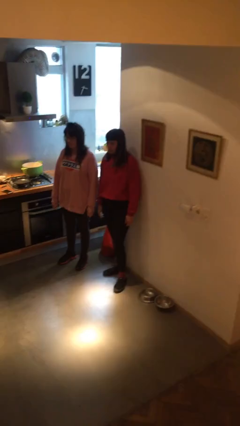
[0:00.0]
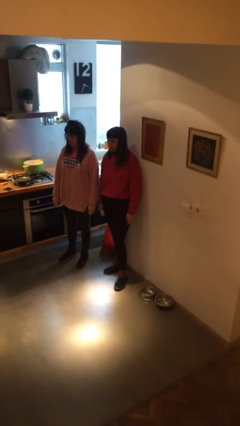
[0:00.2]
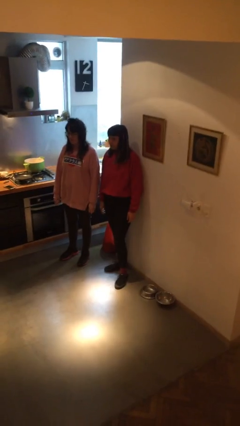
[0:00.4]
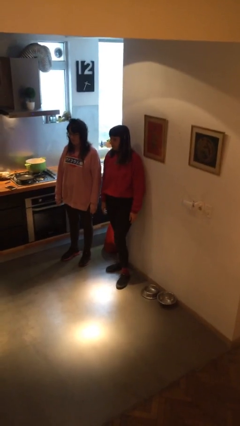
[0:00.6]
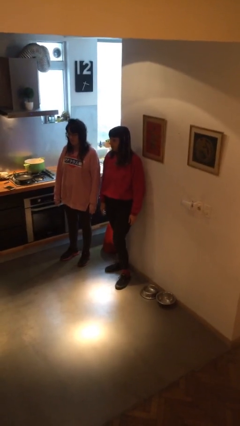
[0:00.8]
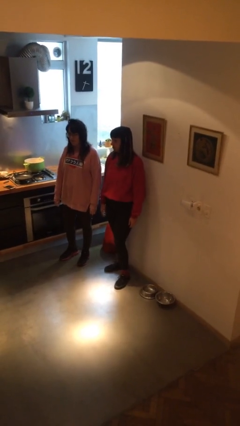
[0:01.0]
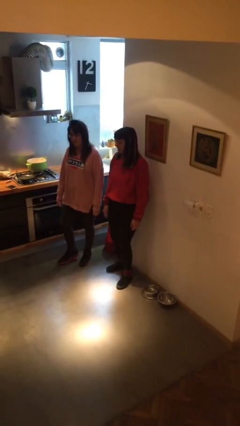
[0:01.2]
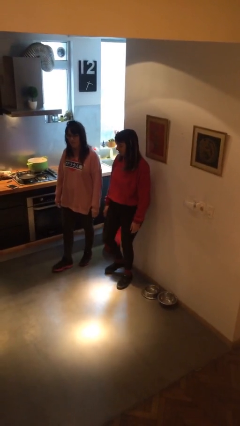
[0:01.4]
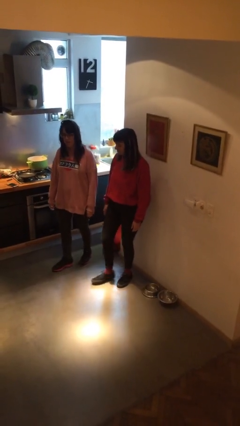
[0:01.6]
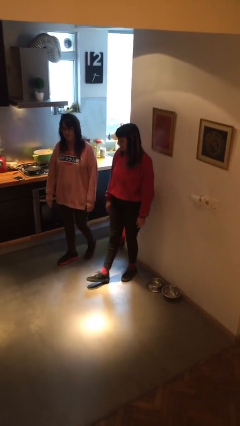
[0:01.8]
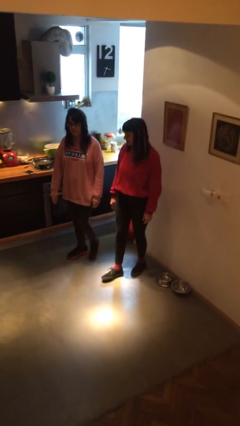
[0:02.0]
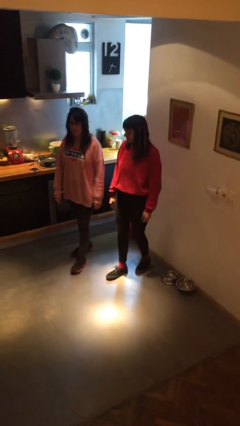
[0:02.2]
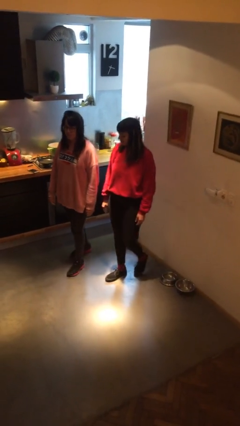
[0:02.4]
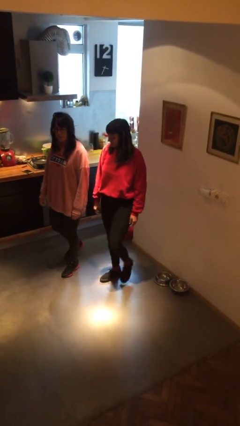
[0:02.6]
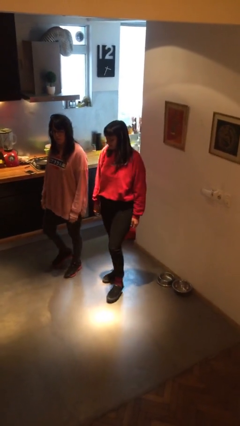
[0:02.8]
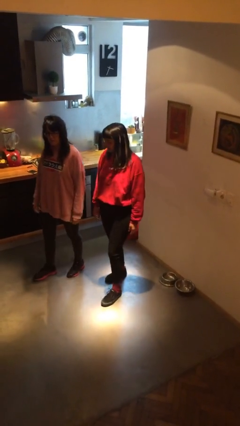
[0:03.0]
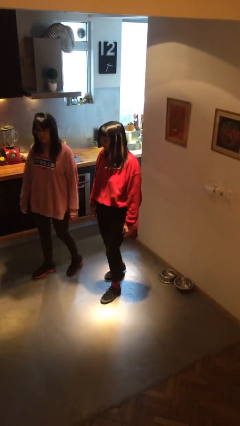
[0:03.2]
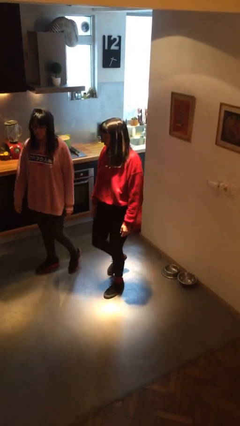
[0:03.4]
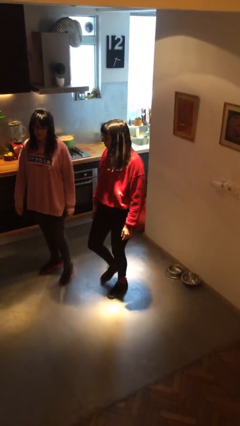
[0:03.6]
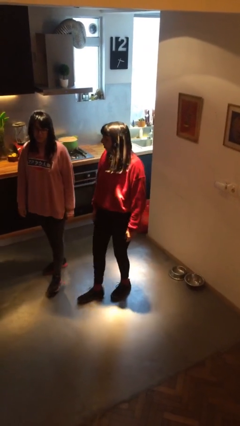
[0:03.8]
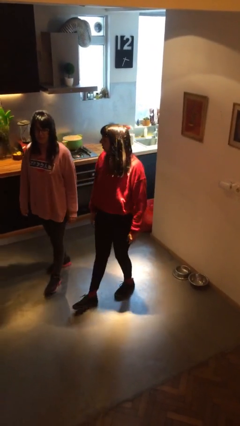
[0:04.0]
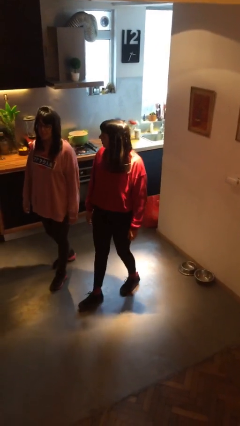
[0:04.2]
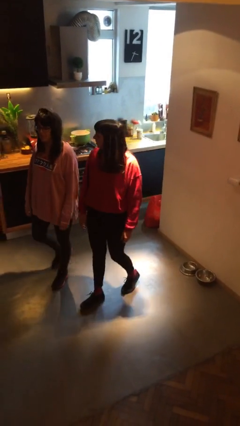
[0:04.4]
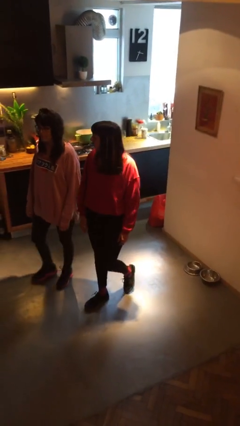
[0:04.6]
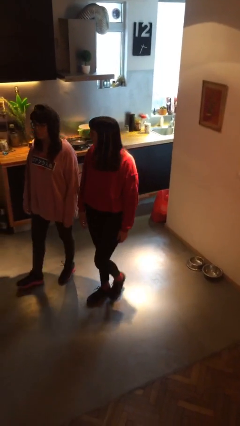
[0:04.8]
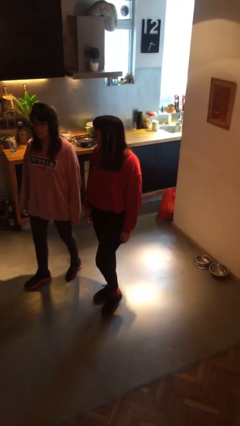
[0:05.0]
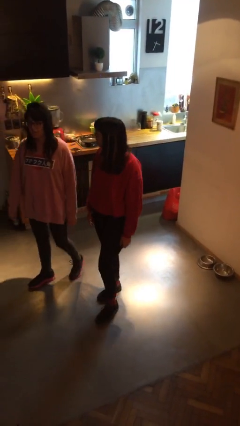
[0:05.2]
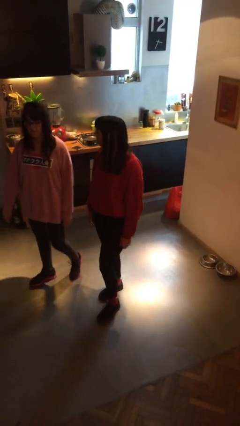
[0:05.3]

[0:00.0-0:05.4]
person talks to person

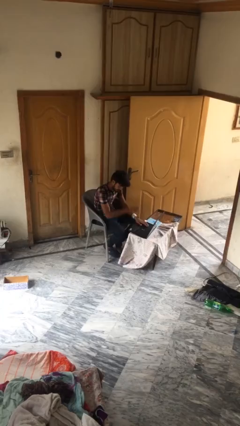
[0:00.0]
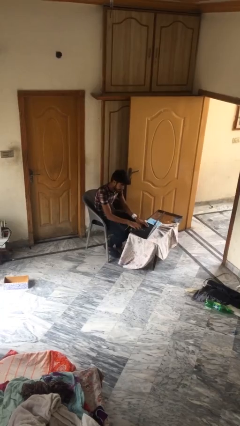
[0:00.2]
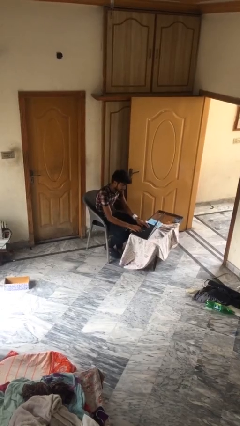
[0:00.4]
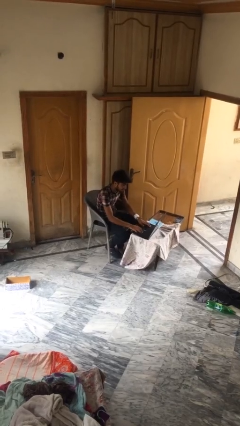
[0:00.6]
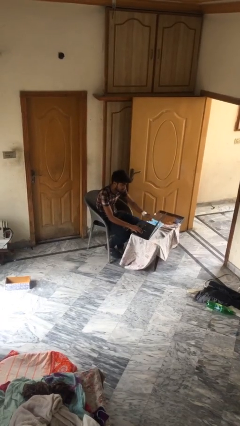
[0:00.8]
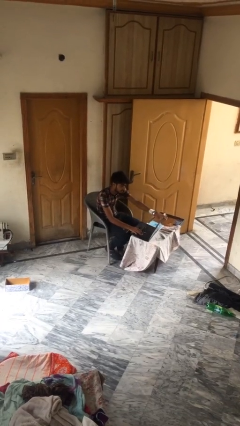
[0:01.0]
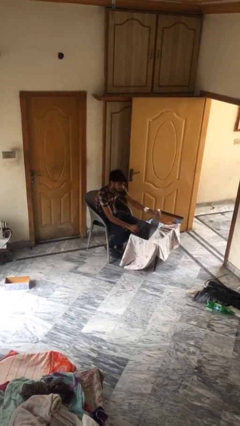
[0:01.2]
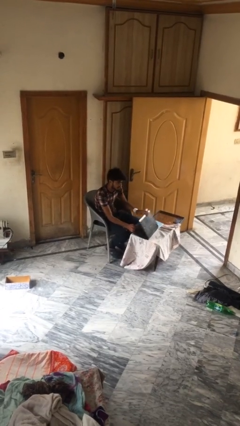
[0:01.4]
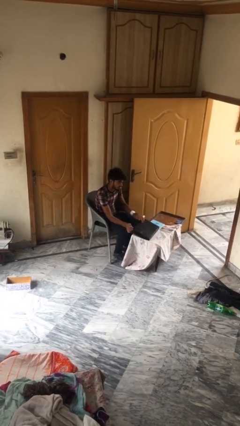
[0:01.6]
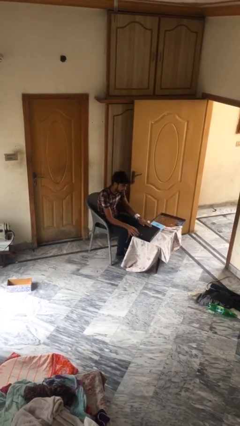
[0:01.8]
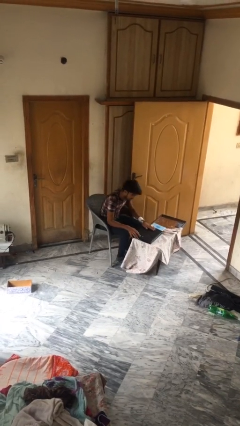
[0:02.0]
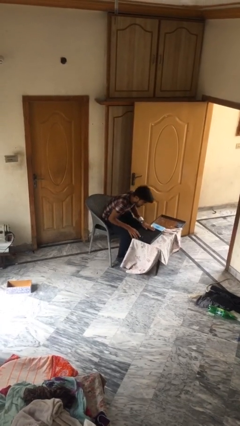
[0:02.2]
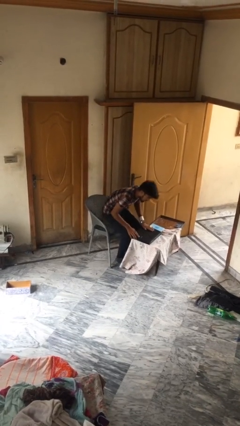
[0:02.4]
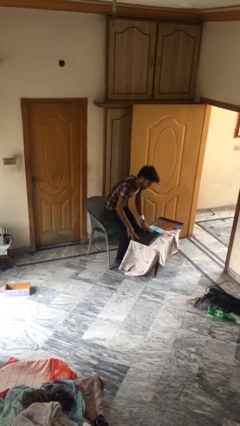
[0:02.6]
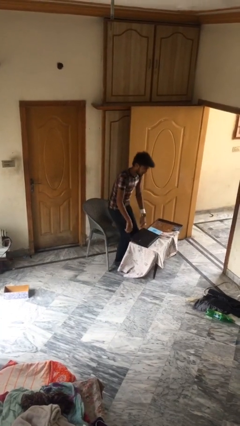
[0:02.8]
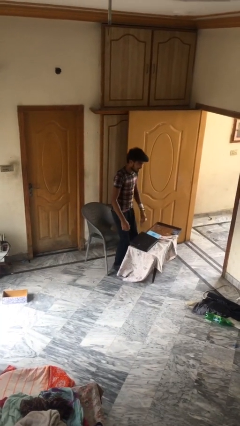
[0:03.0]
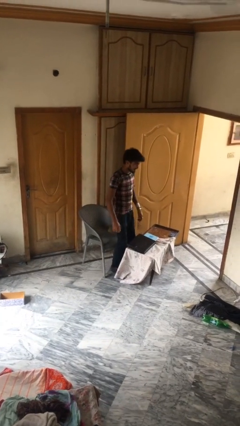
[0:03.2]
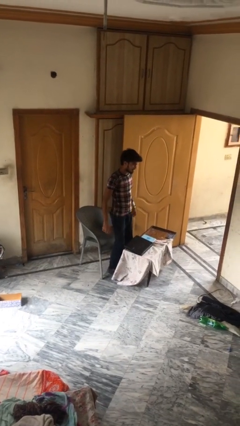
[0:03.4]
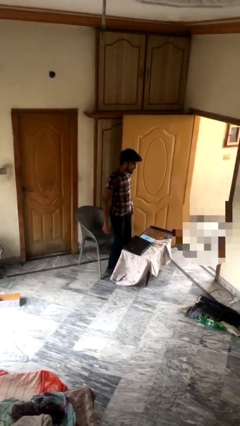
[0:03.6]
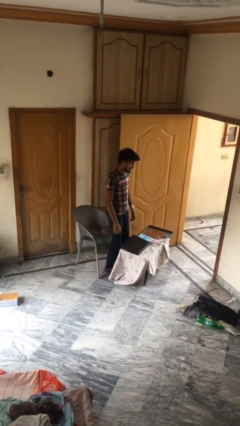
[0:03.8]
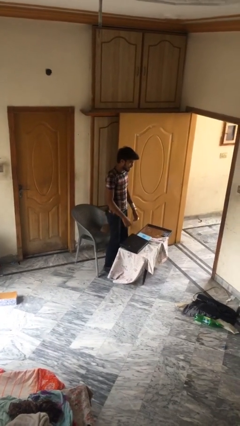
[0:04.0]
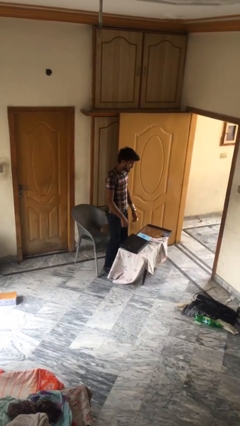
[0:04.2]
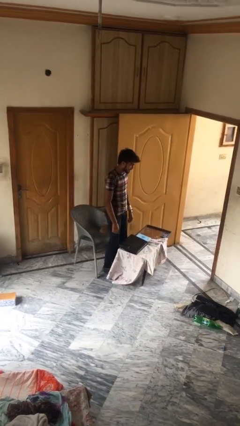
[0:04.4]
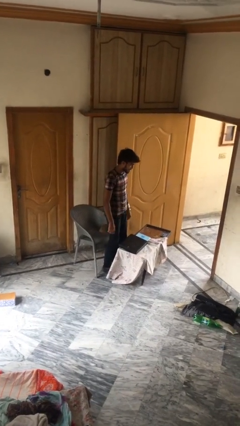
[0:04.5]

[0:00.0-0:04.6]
person stands up

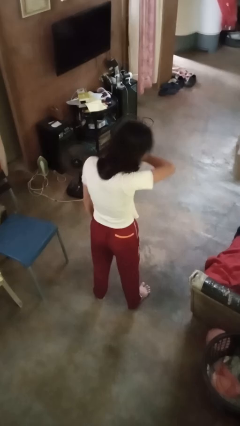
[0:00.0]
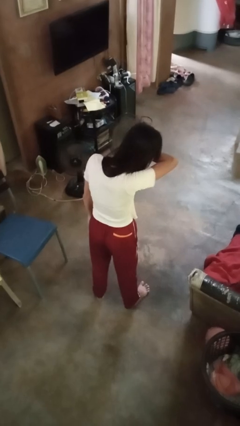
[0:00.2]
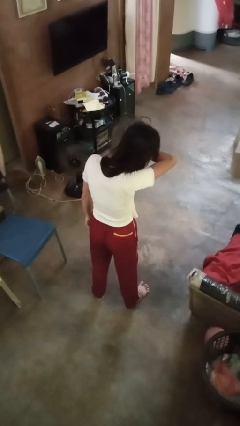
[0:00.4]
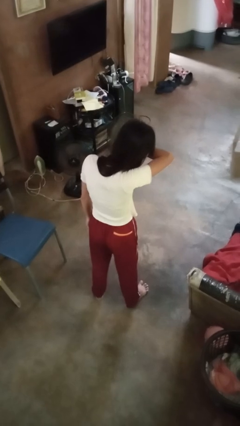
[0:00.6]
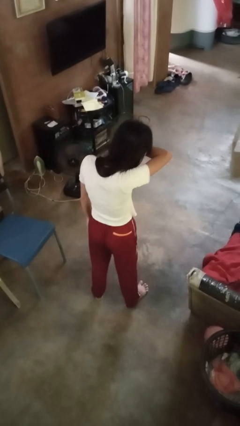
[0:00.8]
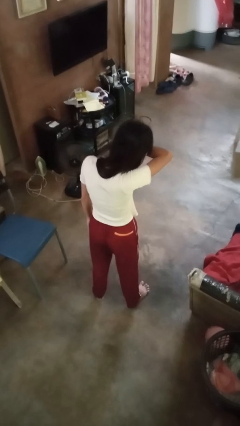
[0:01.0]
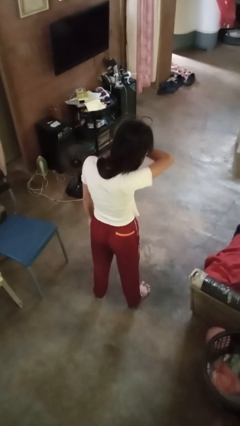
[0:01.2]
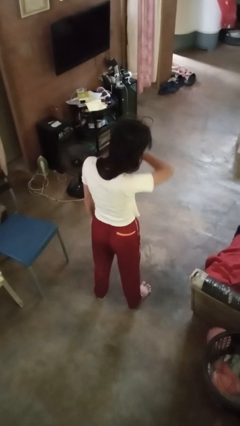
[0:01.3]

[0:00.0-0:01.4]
person sneezes into arm

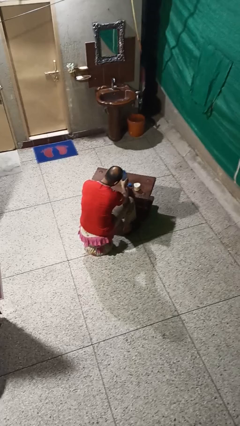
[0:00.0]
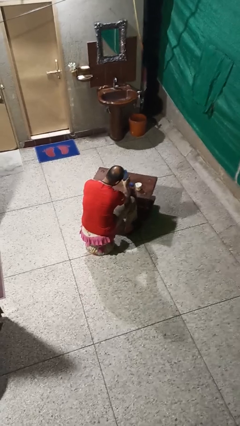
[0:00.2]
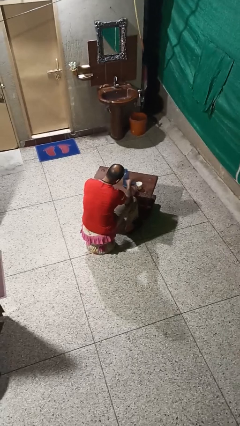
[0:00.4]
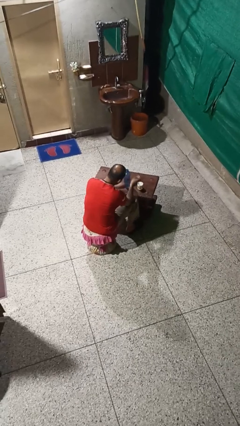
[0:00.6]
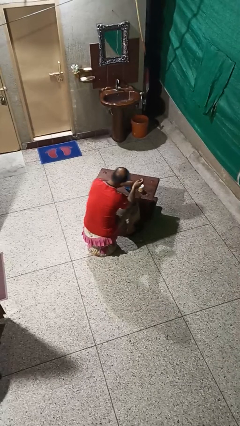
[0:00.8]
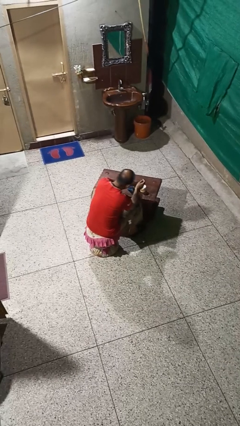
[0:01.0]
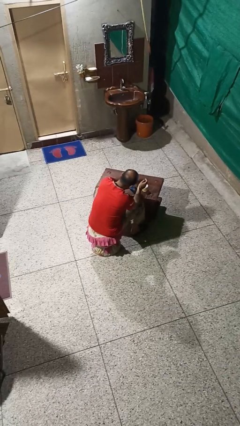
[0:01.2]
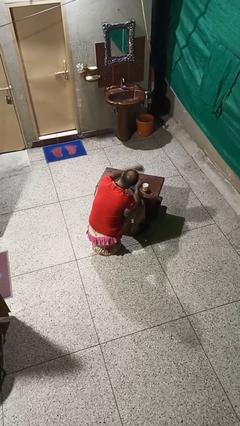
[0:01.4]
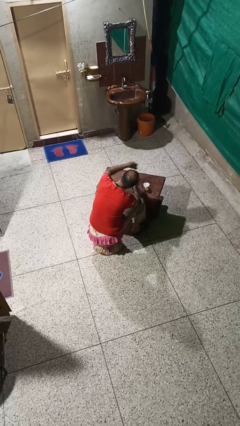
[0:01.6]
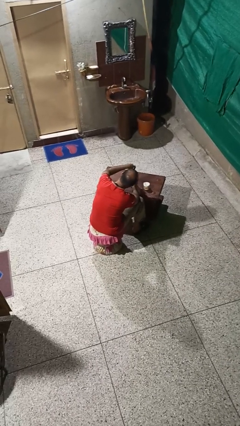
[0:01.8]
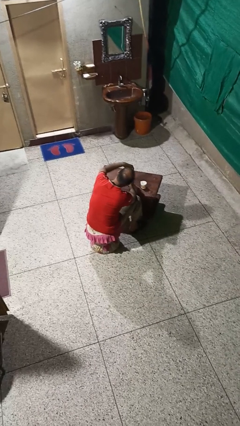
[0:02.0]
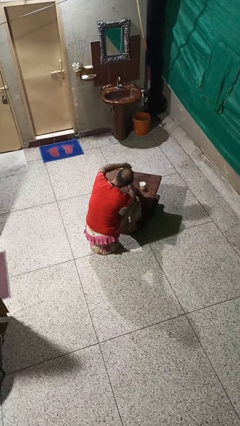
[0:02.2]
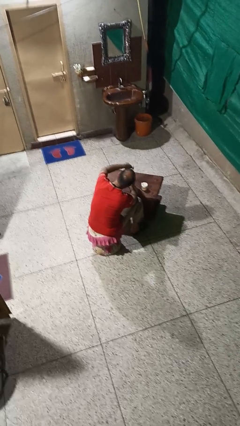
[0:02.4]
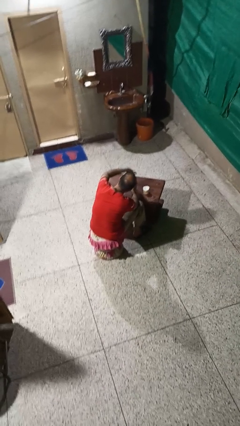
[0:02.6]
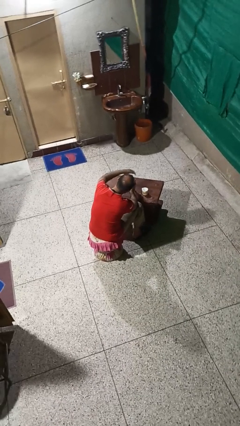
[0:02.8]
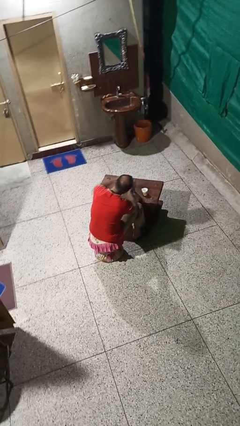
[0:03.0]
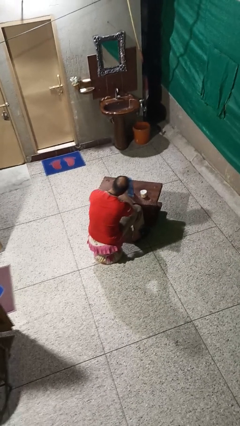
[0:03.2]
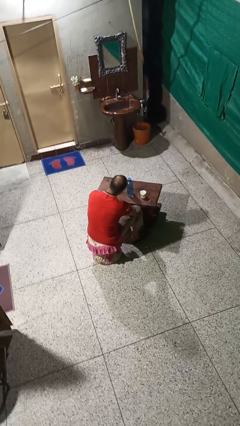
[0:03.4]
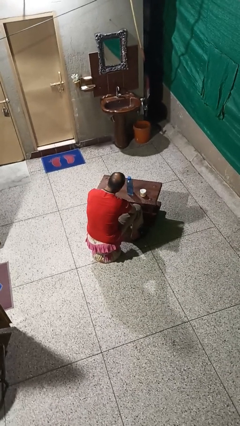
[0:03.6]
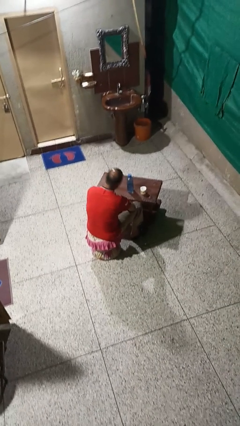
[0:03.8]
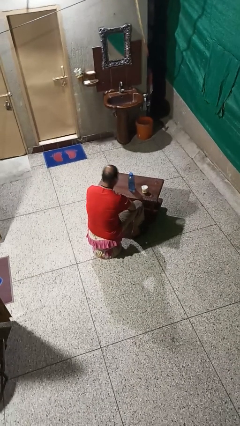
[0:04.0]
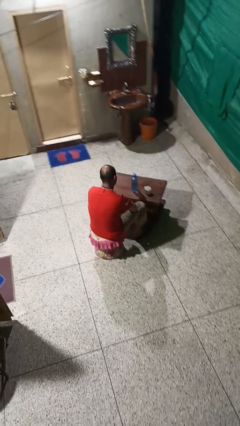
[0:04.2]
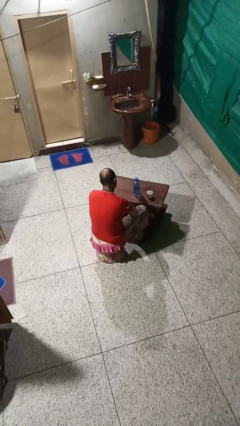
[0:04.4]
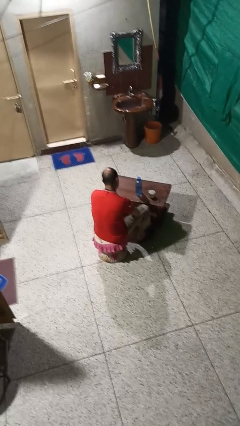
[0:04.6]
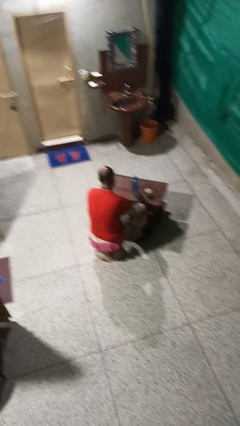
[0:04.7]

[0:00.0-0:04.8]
person screws lid to bottle

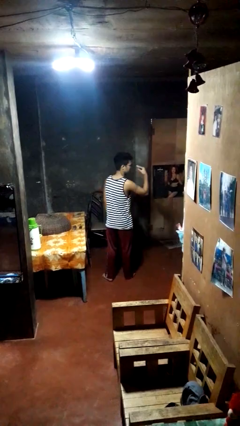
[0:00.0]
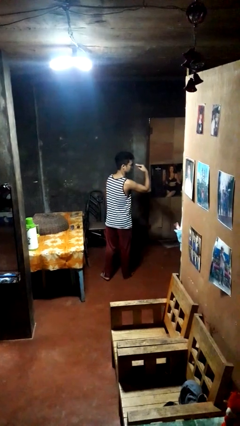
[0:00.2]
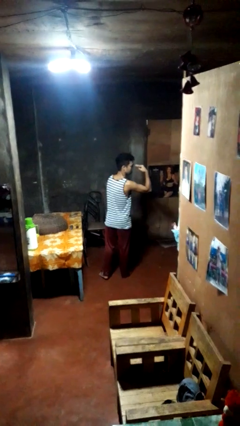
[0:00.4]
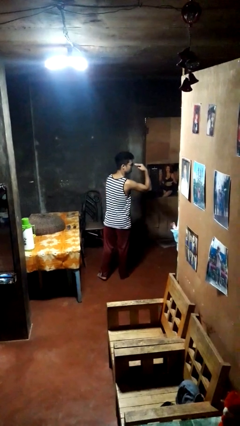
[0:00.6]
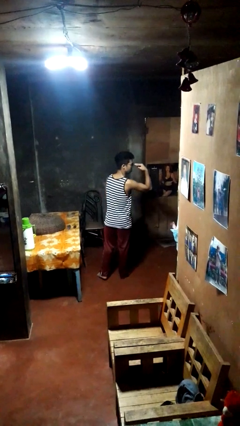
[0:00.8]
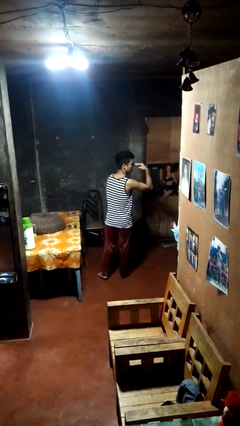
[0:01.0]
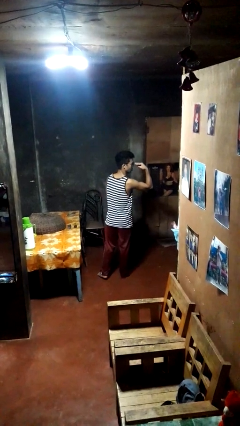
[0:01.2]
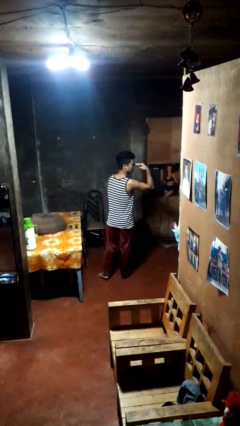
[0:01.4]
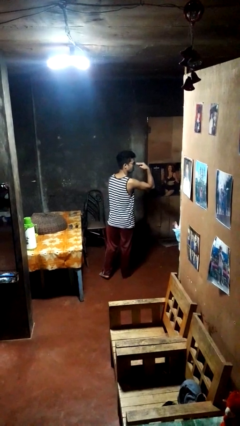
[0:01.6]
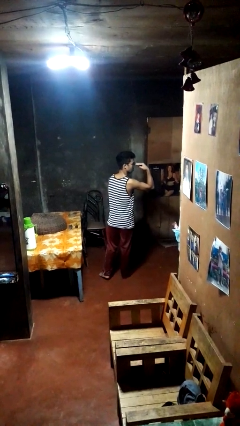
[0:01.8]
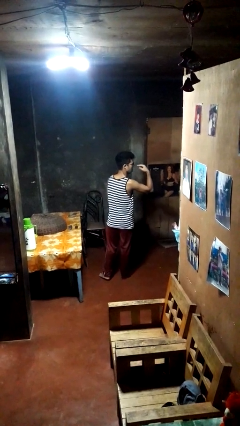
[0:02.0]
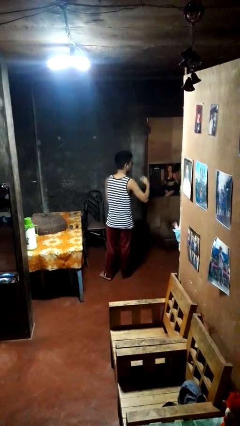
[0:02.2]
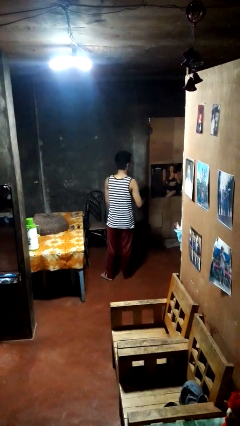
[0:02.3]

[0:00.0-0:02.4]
person gestures watch closely
